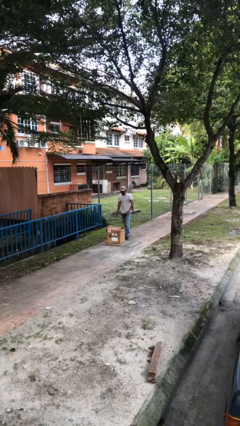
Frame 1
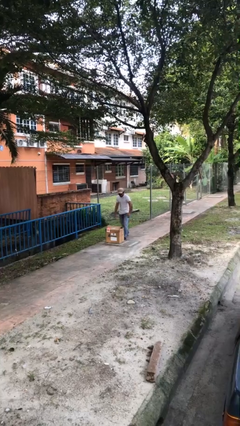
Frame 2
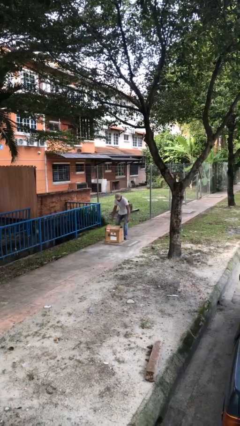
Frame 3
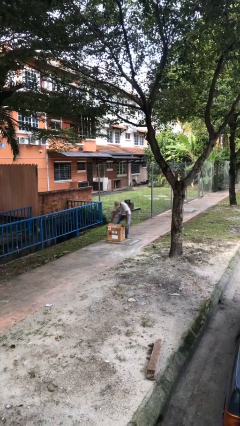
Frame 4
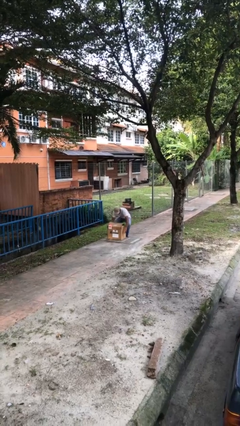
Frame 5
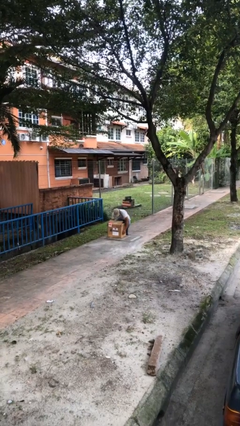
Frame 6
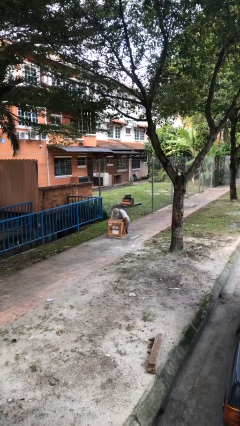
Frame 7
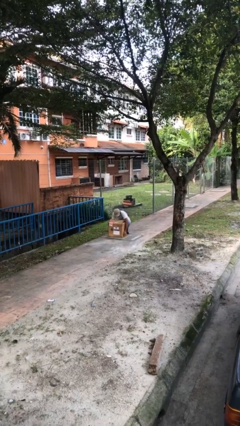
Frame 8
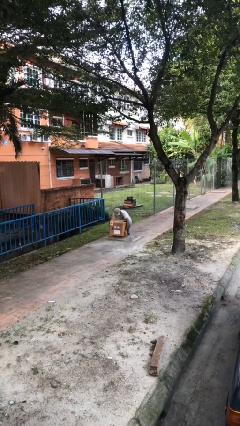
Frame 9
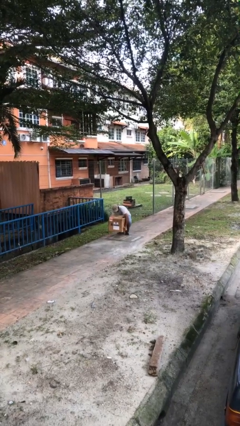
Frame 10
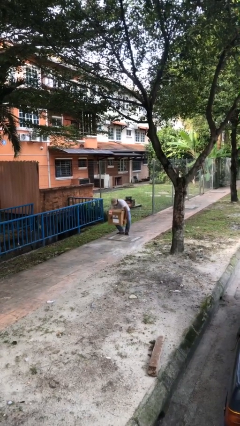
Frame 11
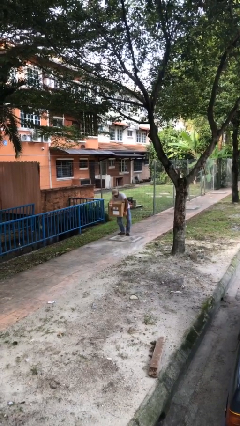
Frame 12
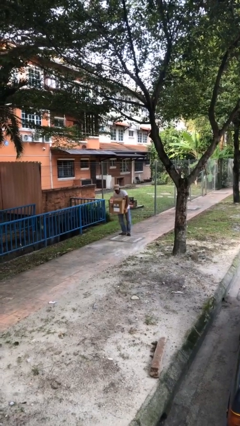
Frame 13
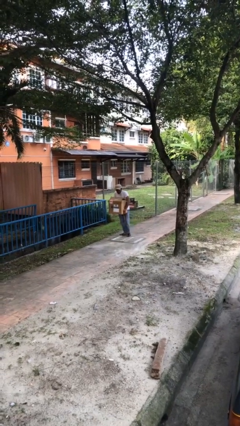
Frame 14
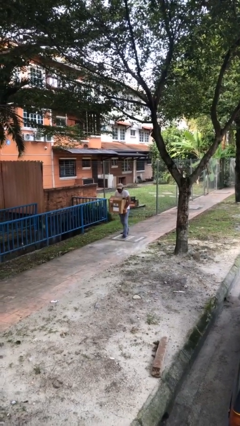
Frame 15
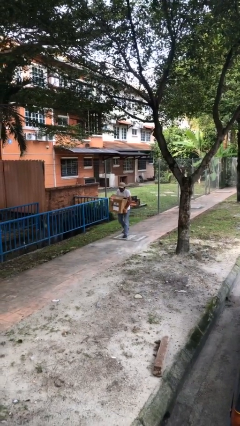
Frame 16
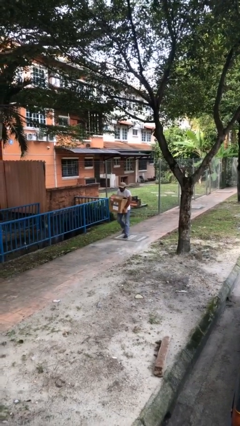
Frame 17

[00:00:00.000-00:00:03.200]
person picks up object from floor

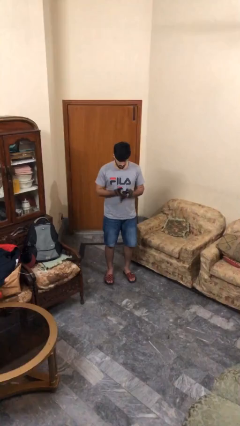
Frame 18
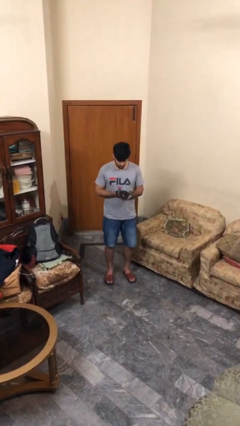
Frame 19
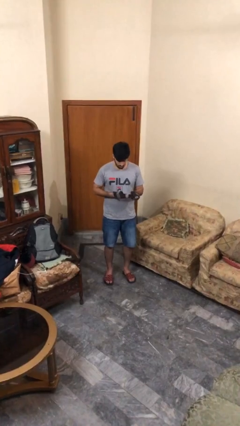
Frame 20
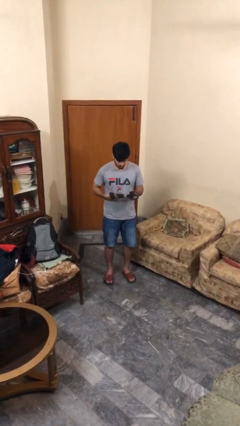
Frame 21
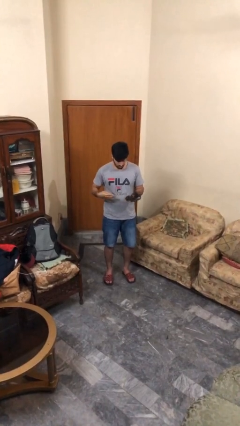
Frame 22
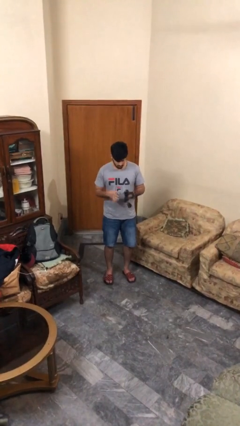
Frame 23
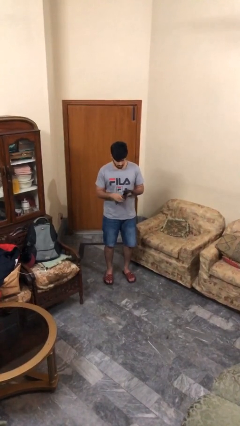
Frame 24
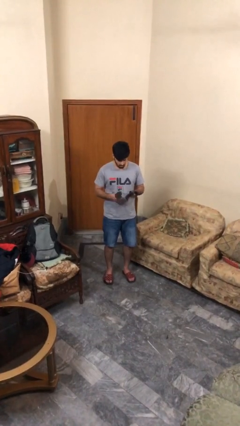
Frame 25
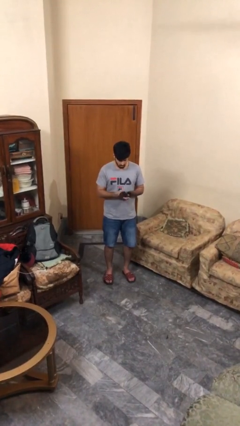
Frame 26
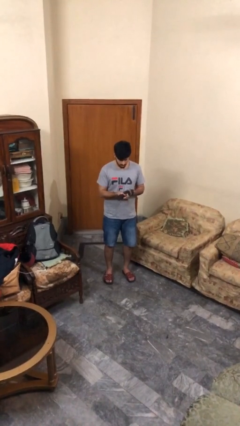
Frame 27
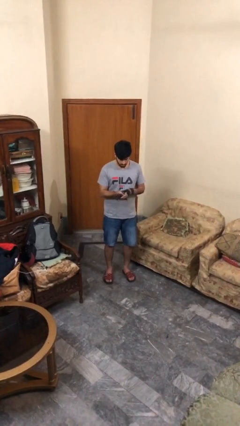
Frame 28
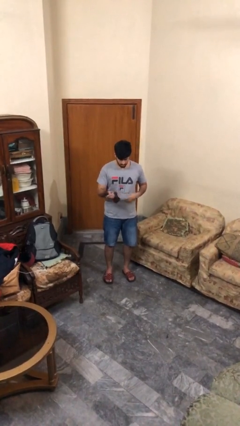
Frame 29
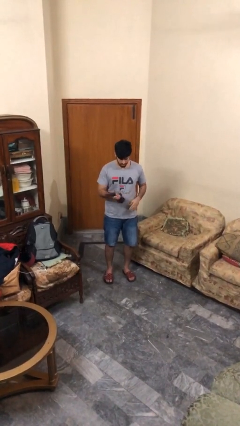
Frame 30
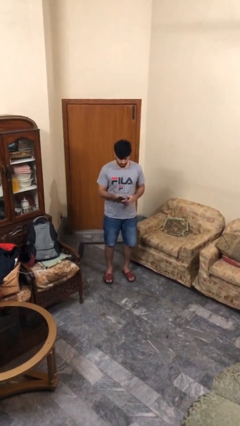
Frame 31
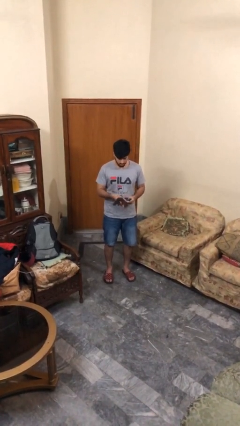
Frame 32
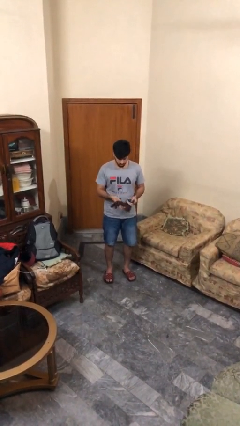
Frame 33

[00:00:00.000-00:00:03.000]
person takes off gloves

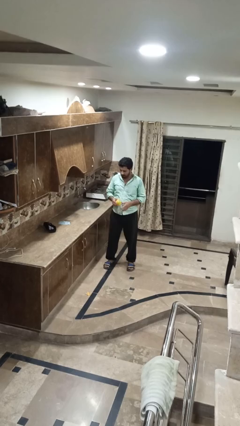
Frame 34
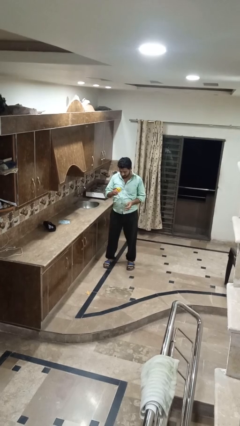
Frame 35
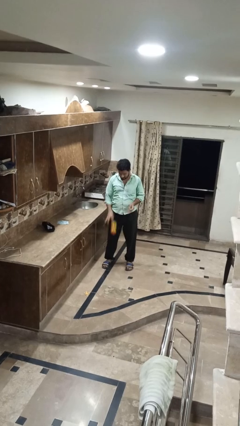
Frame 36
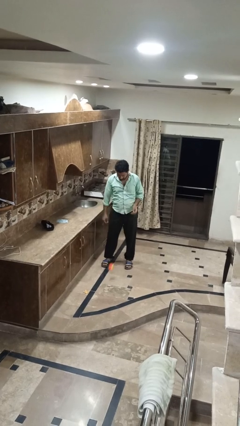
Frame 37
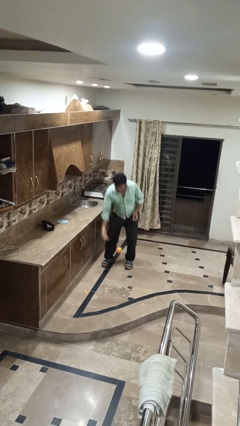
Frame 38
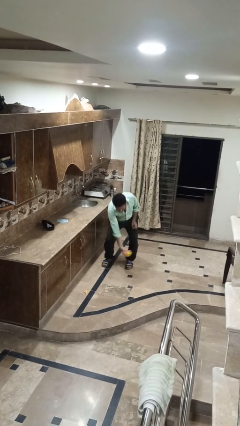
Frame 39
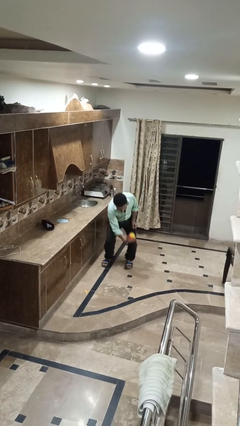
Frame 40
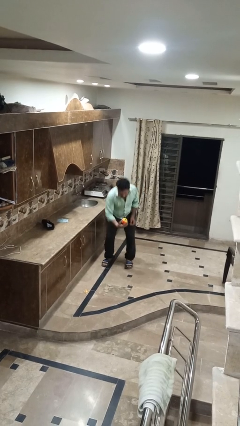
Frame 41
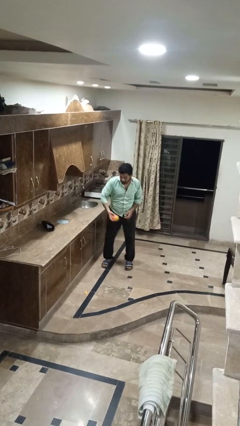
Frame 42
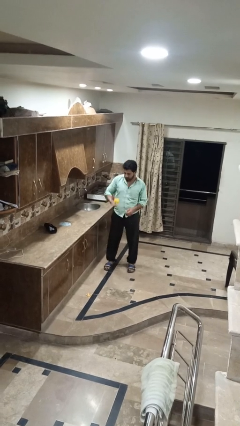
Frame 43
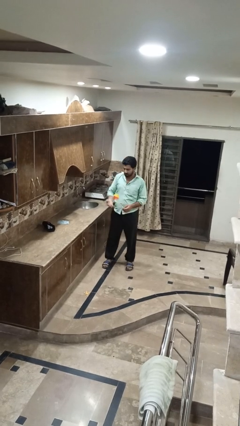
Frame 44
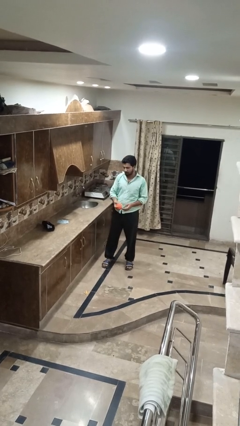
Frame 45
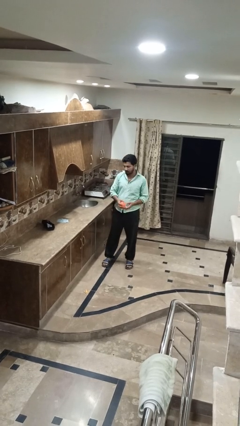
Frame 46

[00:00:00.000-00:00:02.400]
person bounces ball on floor

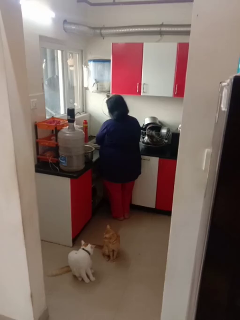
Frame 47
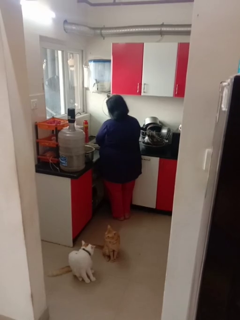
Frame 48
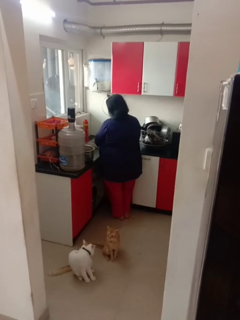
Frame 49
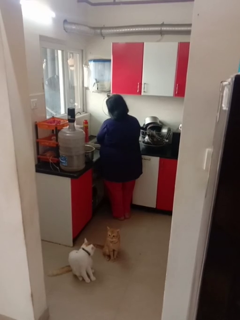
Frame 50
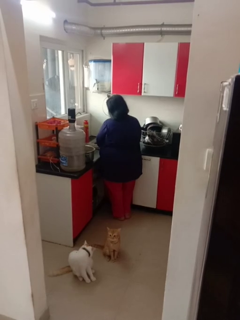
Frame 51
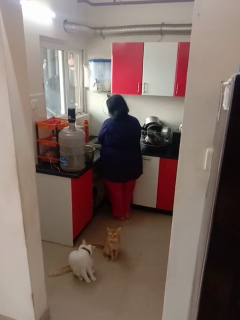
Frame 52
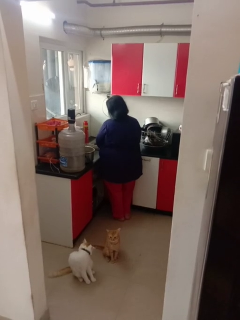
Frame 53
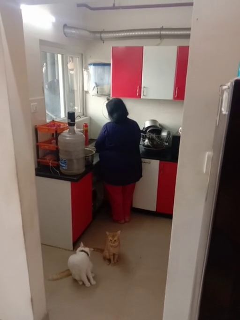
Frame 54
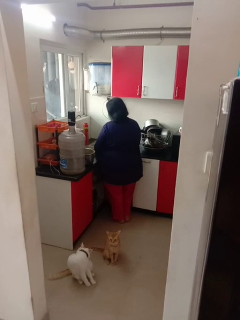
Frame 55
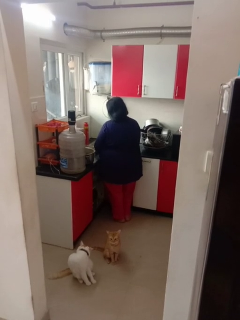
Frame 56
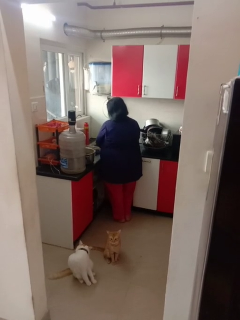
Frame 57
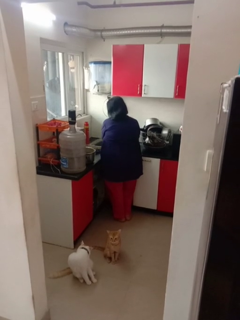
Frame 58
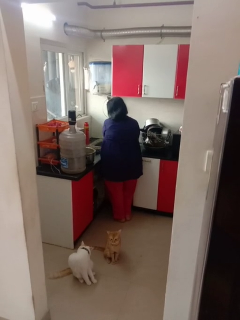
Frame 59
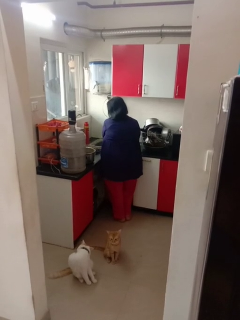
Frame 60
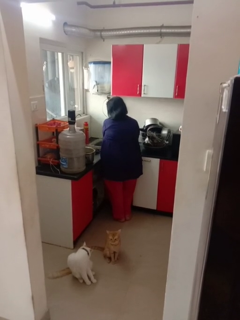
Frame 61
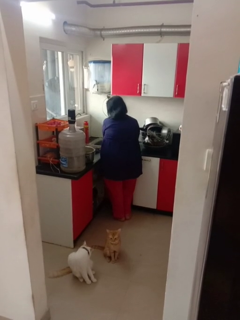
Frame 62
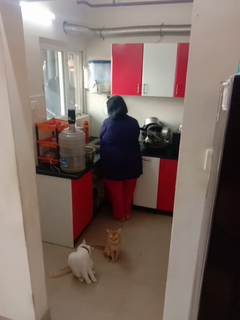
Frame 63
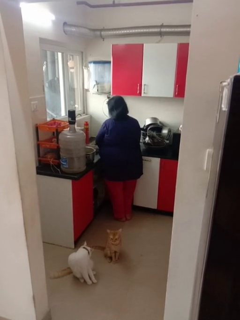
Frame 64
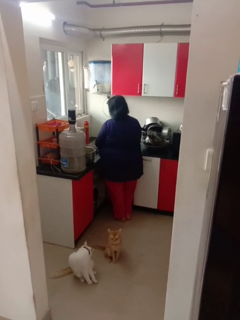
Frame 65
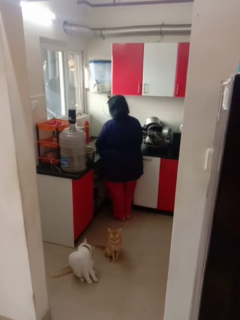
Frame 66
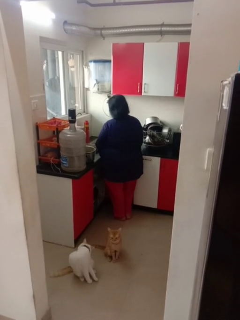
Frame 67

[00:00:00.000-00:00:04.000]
person washes dish

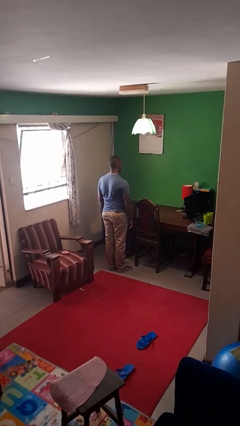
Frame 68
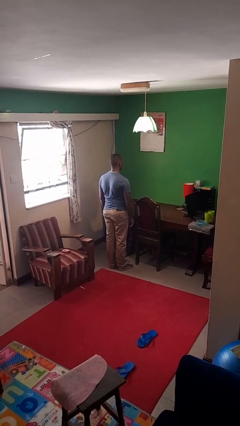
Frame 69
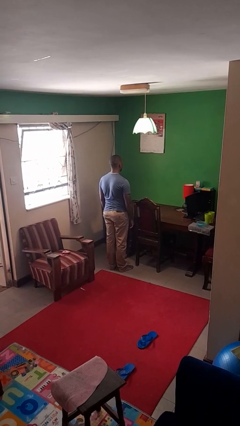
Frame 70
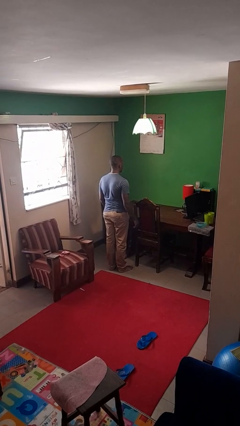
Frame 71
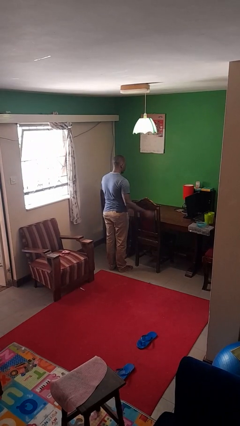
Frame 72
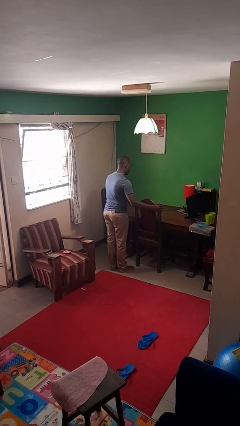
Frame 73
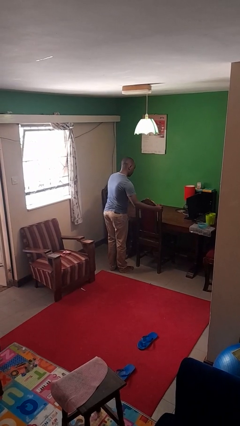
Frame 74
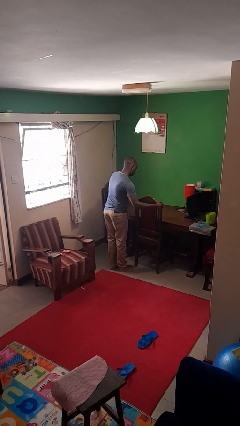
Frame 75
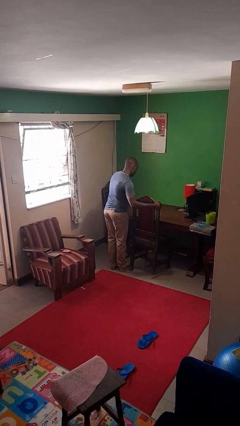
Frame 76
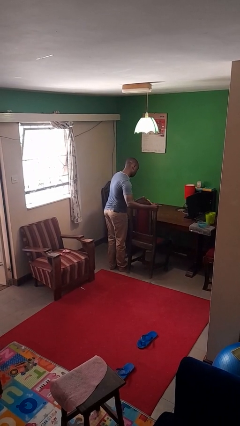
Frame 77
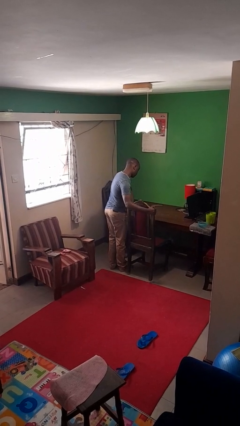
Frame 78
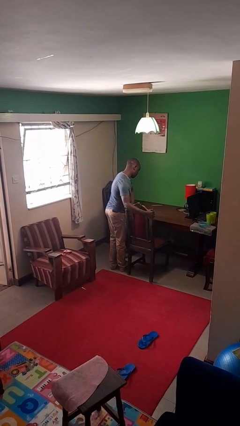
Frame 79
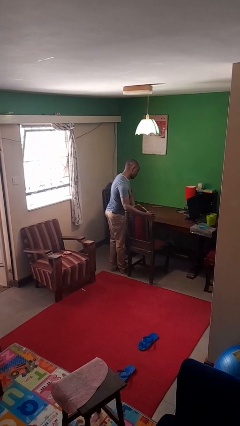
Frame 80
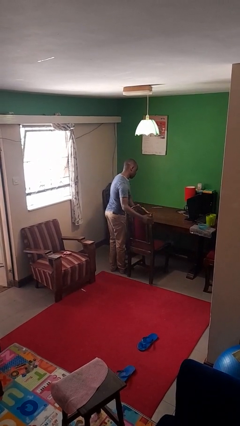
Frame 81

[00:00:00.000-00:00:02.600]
person pulls out chair

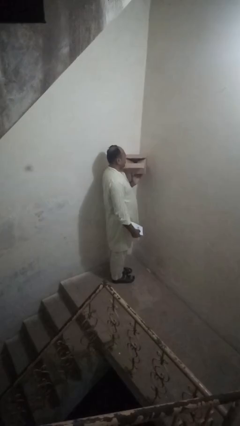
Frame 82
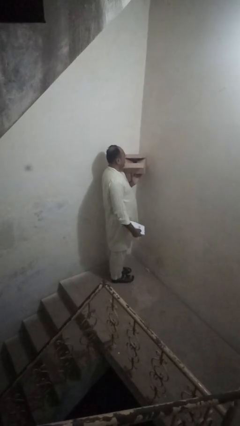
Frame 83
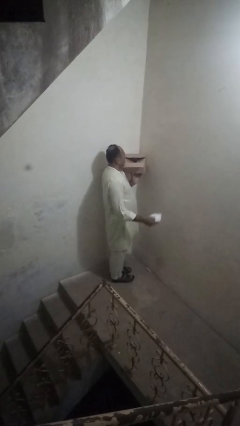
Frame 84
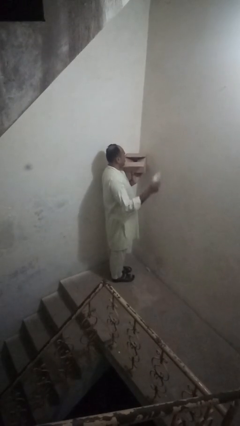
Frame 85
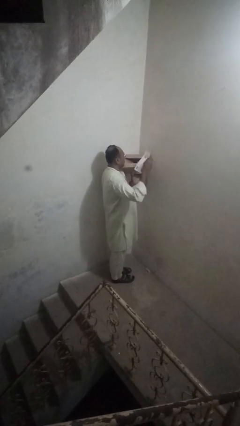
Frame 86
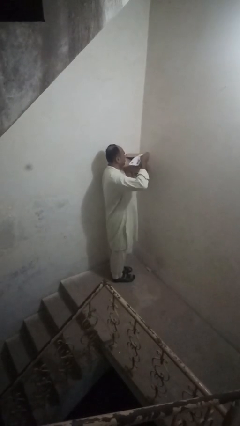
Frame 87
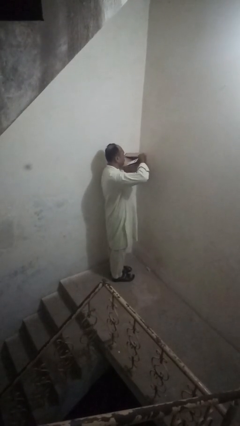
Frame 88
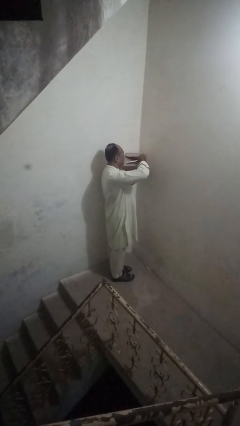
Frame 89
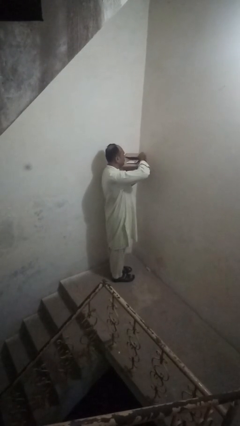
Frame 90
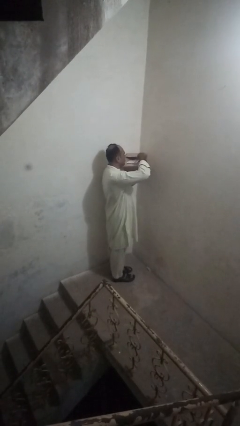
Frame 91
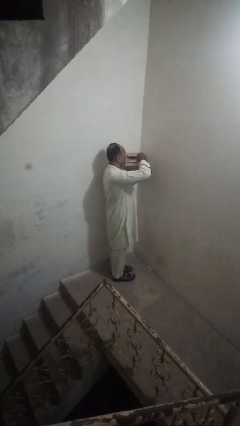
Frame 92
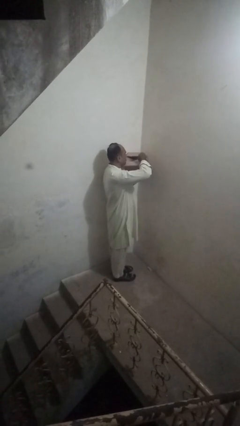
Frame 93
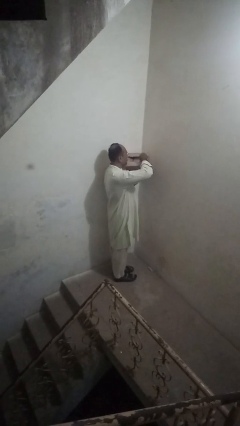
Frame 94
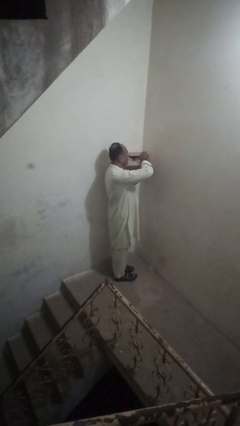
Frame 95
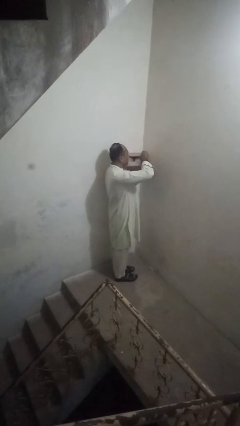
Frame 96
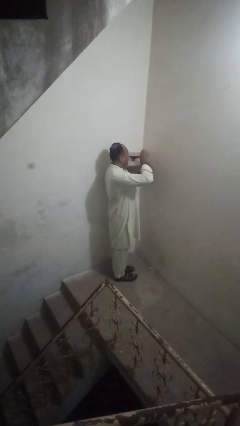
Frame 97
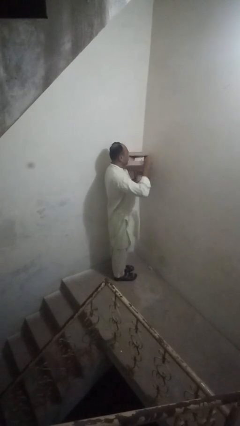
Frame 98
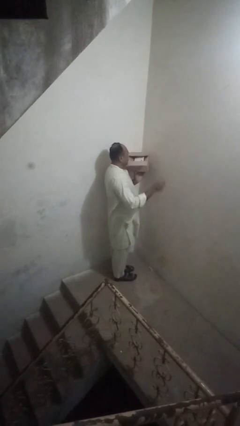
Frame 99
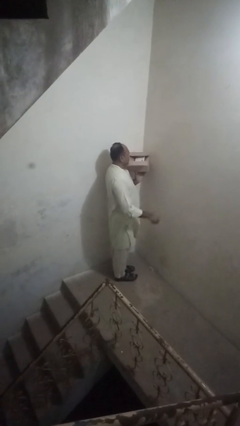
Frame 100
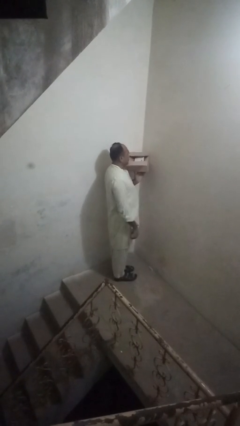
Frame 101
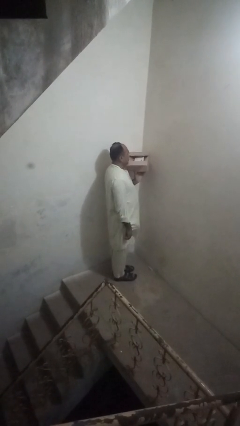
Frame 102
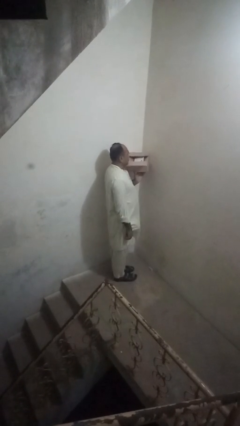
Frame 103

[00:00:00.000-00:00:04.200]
person puts letters in mailbox
